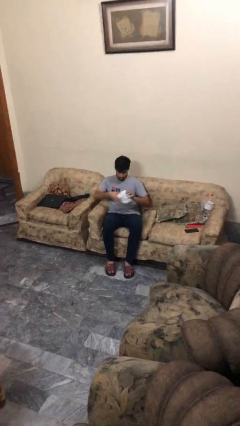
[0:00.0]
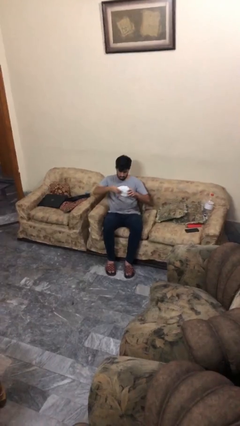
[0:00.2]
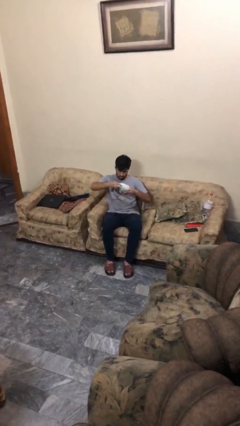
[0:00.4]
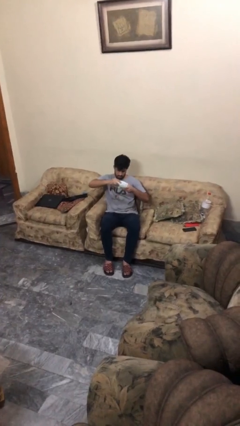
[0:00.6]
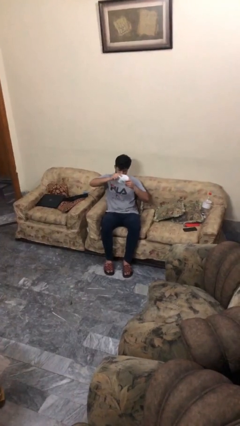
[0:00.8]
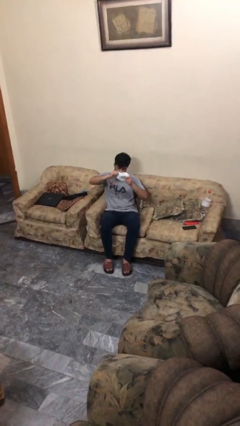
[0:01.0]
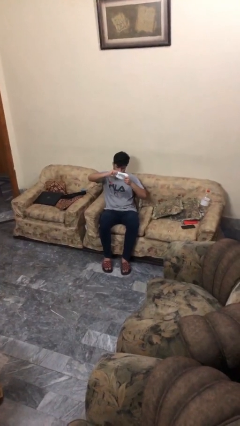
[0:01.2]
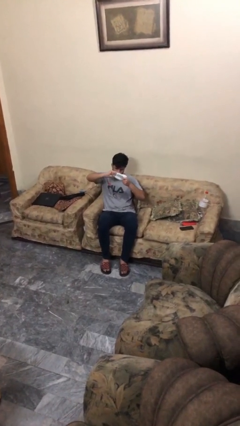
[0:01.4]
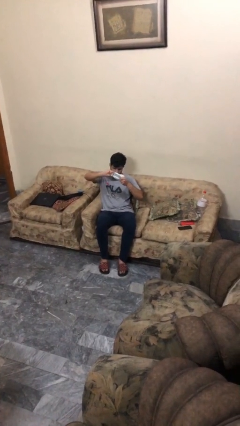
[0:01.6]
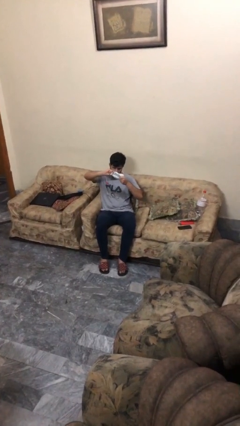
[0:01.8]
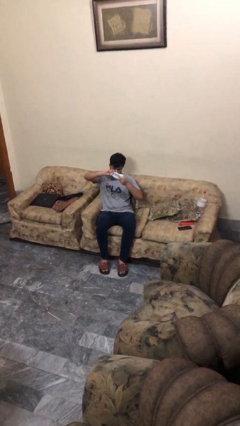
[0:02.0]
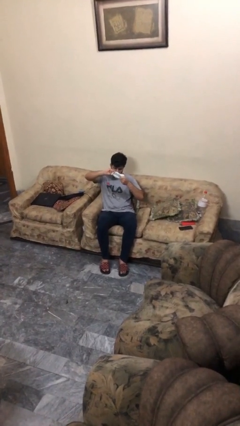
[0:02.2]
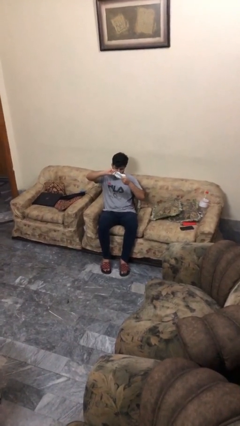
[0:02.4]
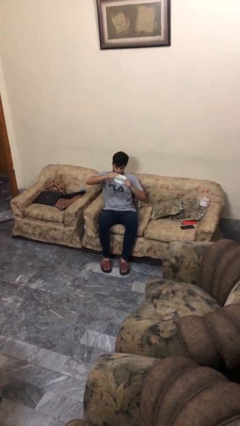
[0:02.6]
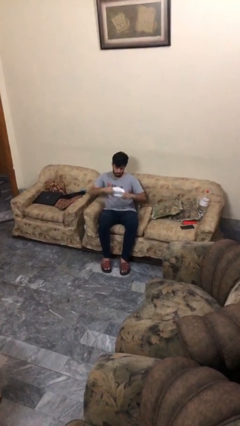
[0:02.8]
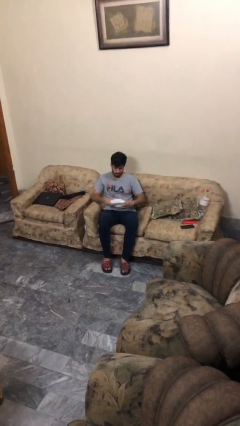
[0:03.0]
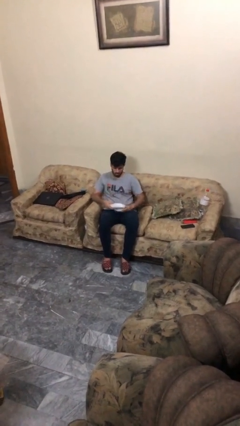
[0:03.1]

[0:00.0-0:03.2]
person squeezes object

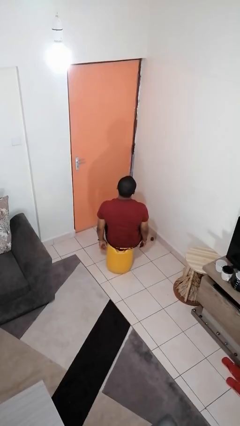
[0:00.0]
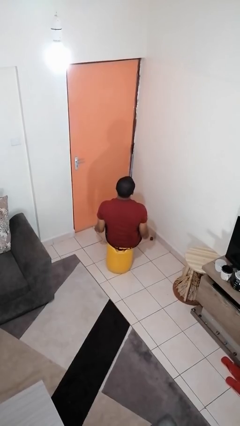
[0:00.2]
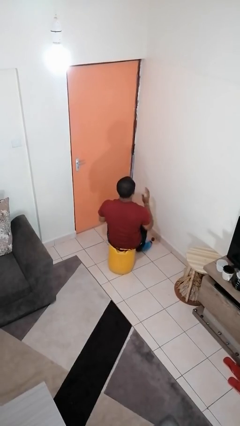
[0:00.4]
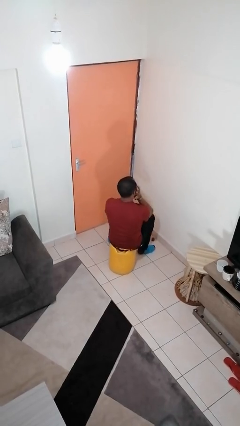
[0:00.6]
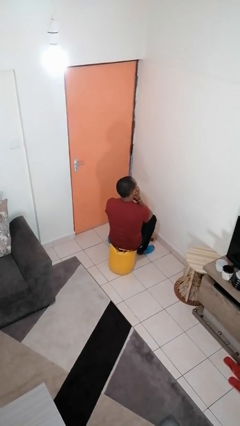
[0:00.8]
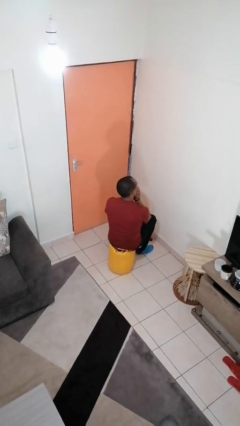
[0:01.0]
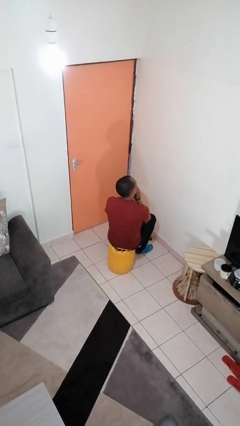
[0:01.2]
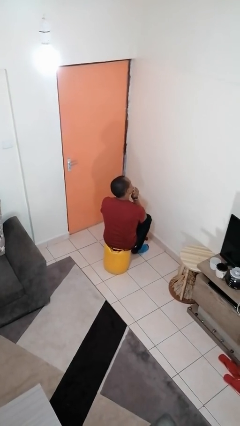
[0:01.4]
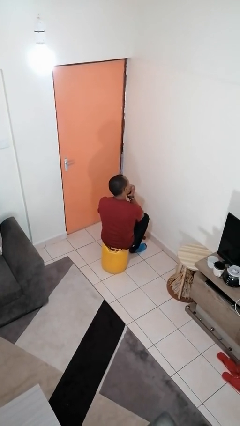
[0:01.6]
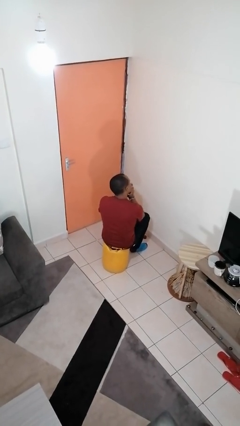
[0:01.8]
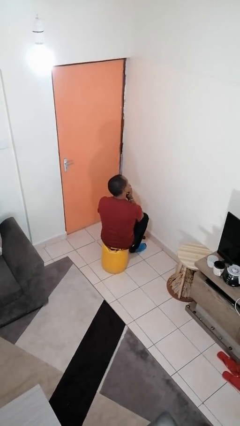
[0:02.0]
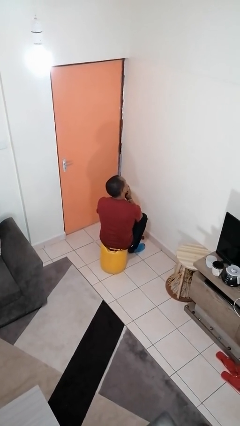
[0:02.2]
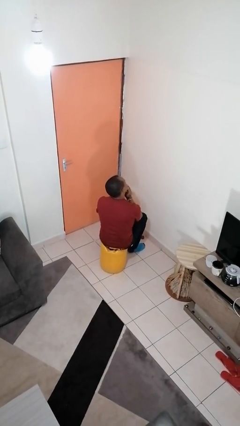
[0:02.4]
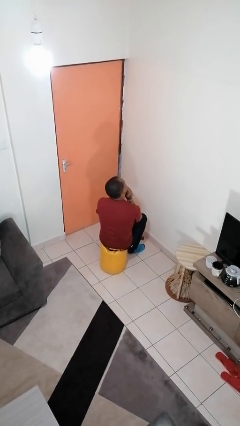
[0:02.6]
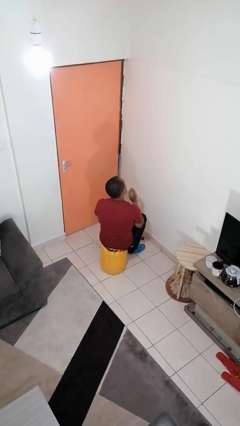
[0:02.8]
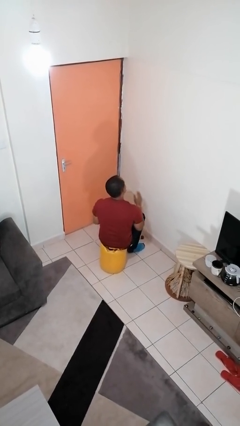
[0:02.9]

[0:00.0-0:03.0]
person strokes chin

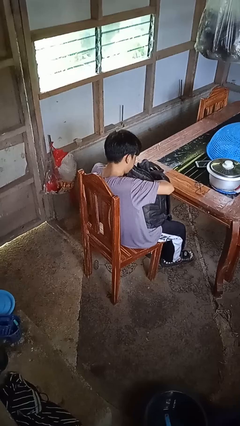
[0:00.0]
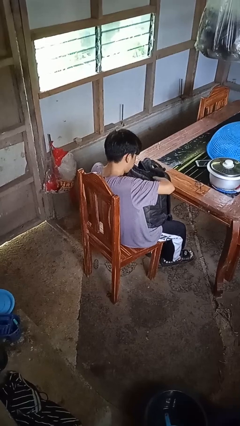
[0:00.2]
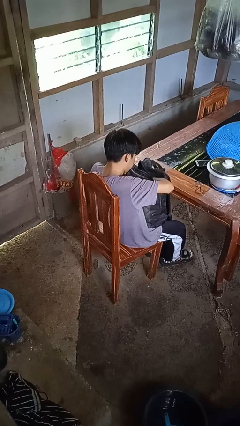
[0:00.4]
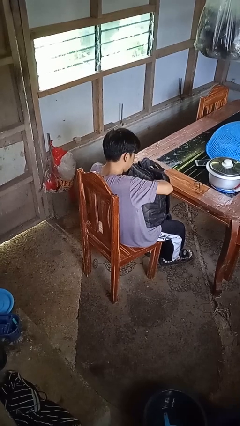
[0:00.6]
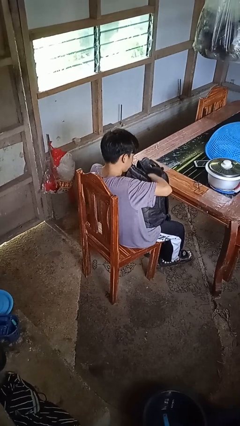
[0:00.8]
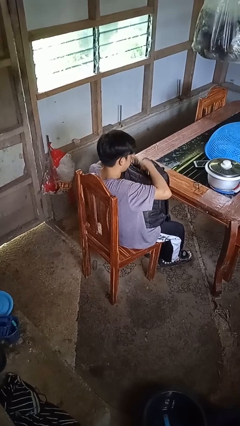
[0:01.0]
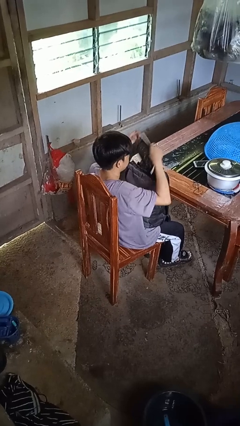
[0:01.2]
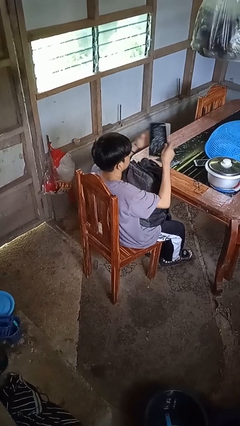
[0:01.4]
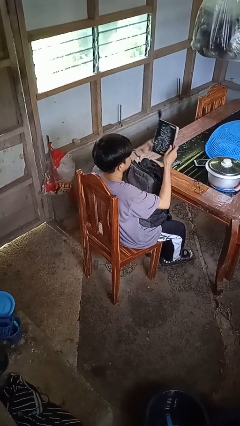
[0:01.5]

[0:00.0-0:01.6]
person takes object from backpack

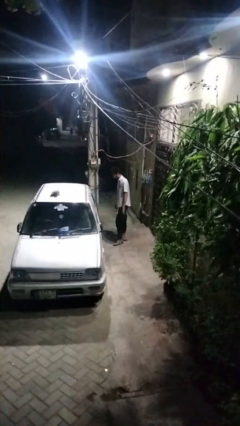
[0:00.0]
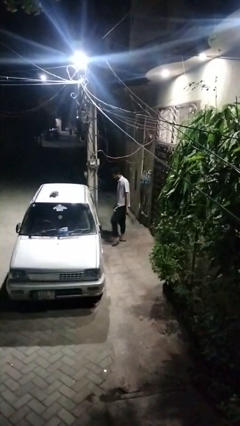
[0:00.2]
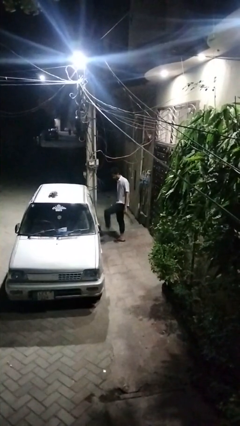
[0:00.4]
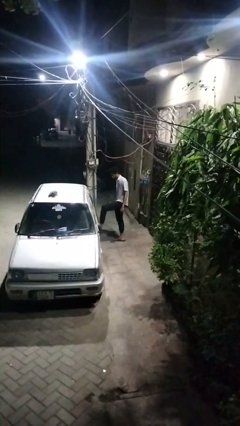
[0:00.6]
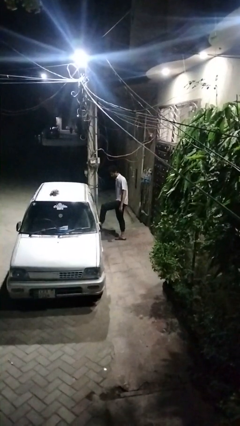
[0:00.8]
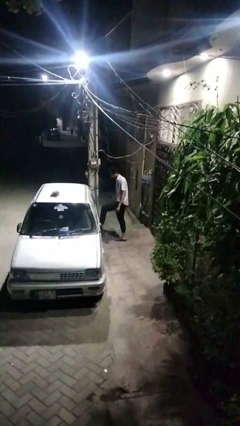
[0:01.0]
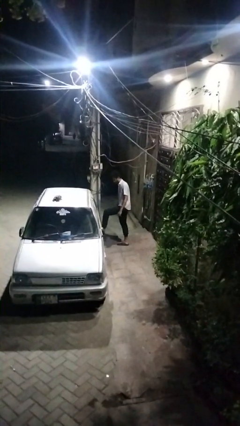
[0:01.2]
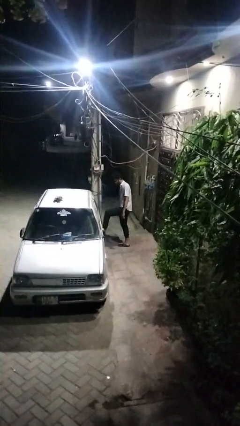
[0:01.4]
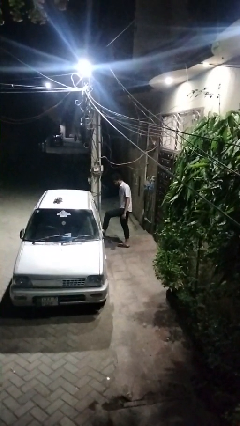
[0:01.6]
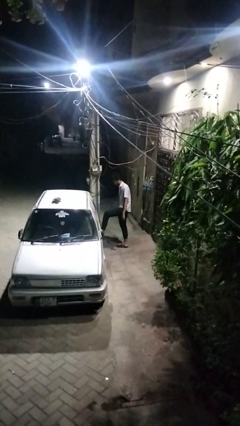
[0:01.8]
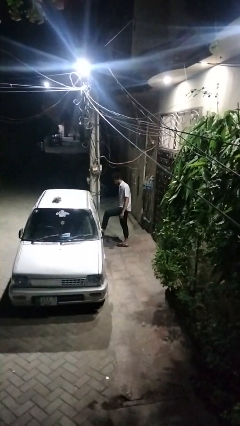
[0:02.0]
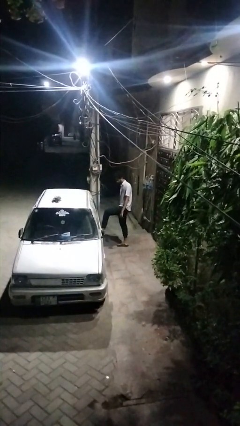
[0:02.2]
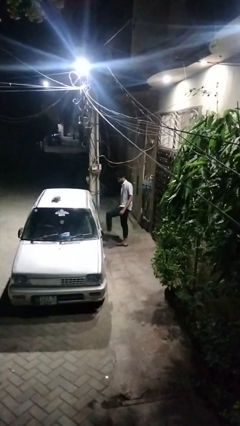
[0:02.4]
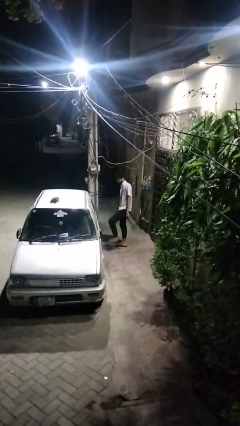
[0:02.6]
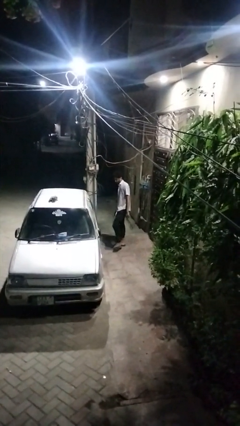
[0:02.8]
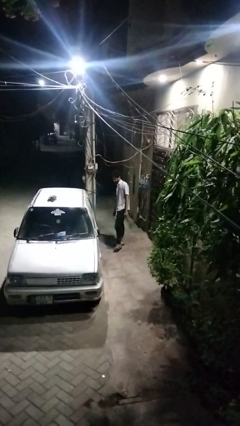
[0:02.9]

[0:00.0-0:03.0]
person kicks car tires

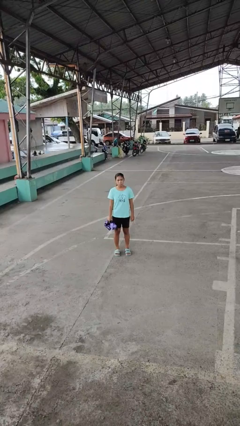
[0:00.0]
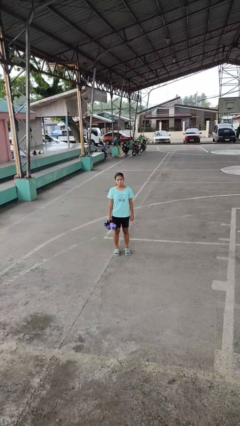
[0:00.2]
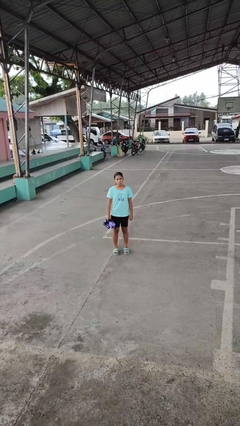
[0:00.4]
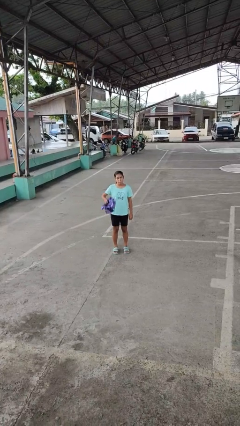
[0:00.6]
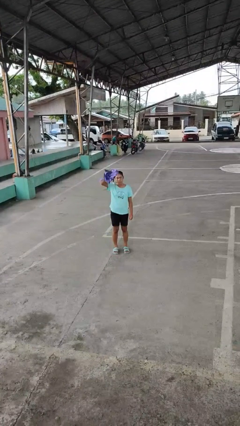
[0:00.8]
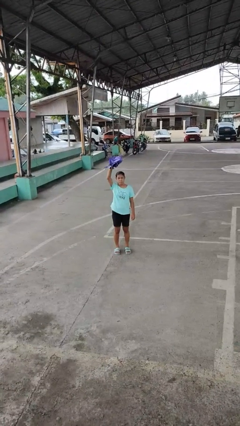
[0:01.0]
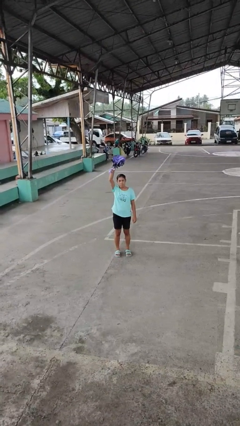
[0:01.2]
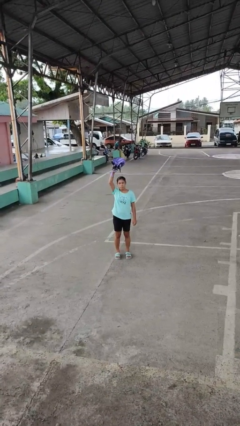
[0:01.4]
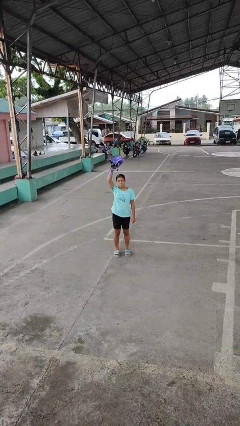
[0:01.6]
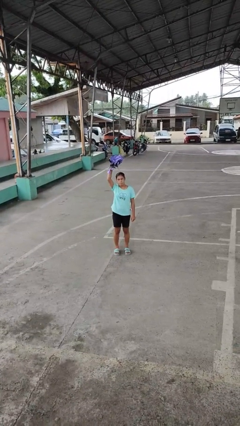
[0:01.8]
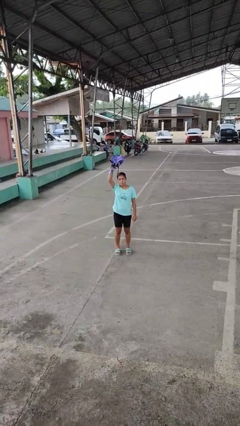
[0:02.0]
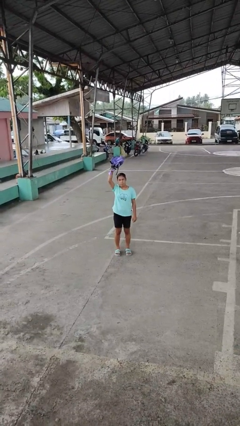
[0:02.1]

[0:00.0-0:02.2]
person holds object above head

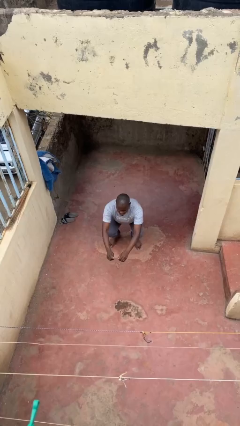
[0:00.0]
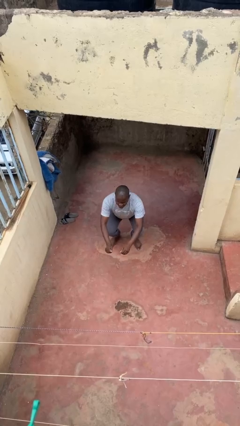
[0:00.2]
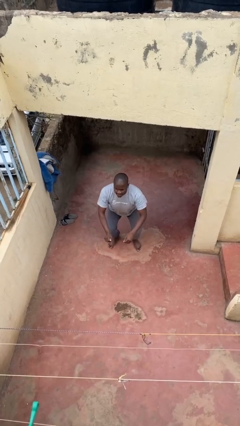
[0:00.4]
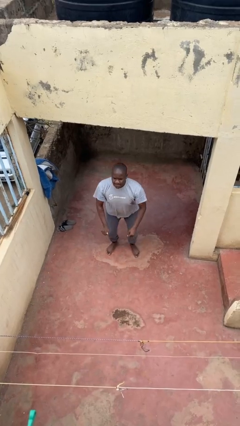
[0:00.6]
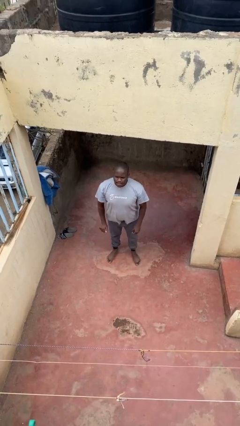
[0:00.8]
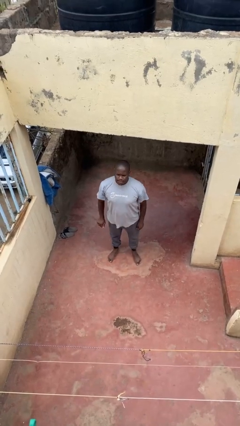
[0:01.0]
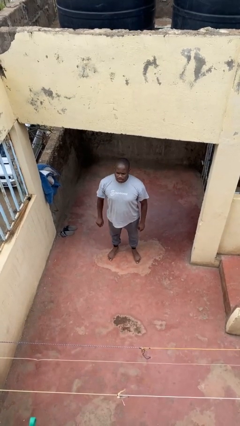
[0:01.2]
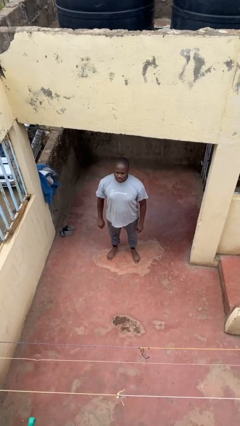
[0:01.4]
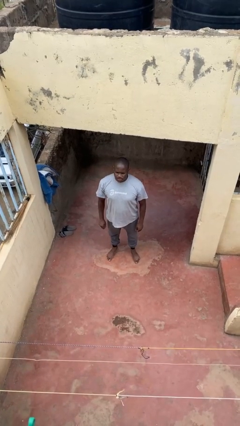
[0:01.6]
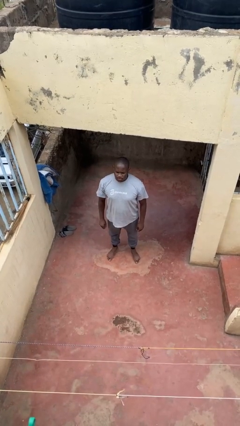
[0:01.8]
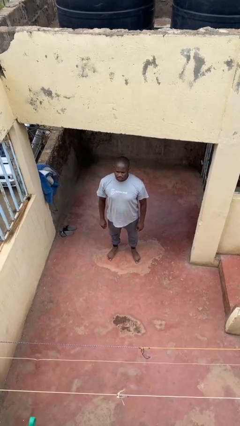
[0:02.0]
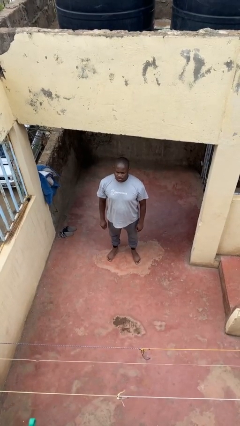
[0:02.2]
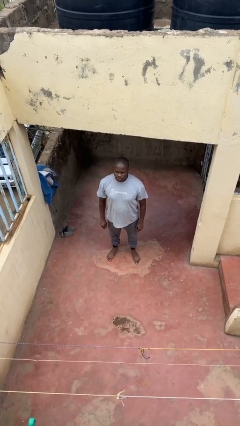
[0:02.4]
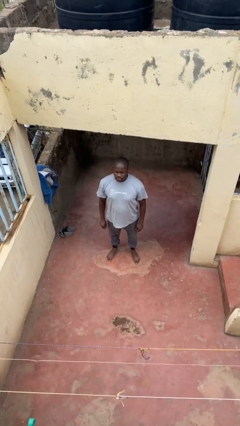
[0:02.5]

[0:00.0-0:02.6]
person stands up

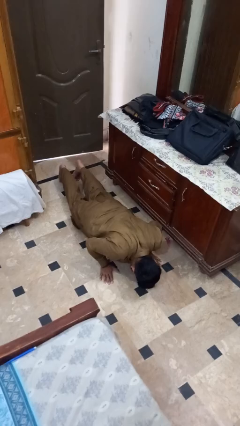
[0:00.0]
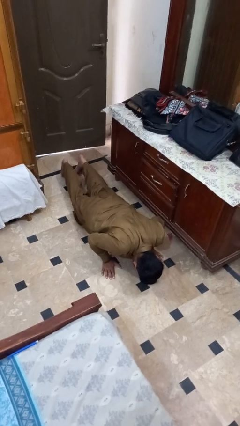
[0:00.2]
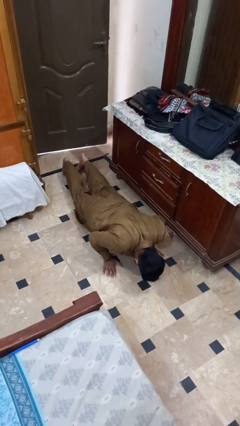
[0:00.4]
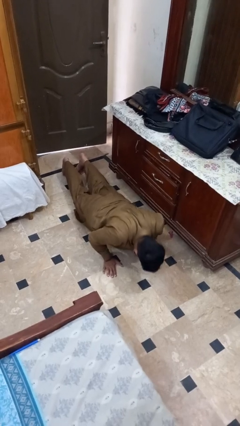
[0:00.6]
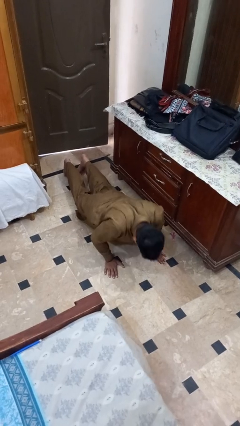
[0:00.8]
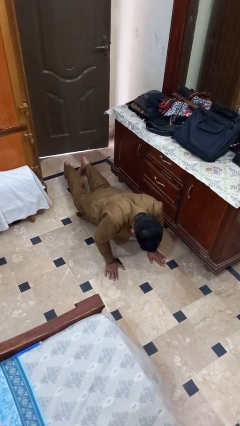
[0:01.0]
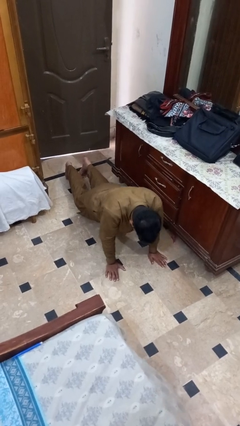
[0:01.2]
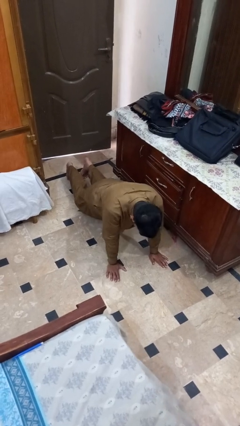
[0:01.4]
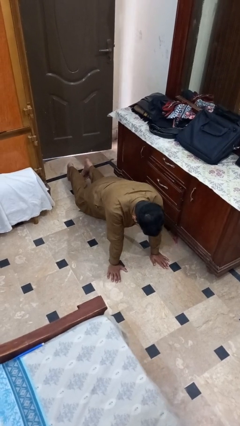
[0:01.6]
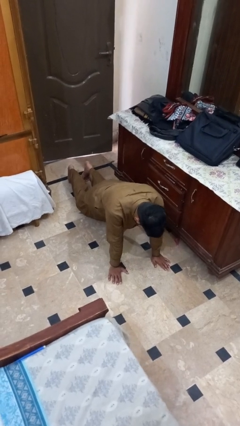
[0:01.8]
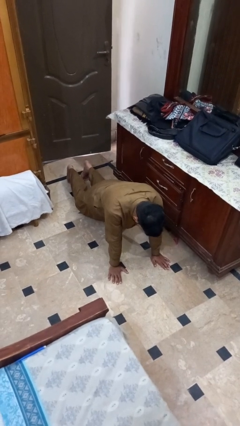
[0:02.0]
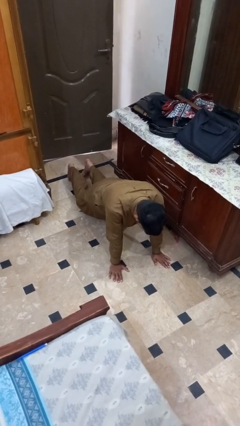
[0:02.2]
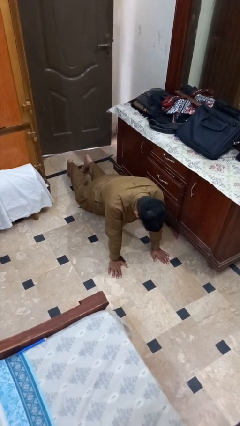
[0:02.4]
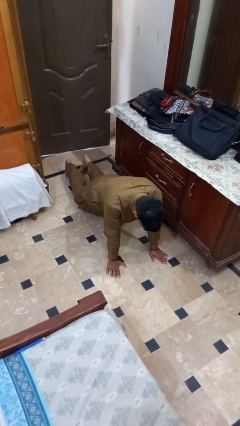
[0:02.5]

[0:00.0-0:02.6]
person exercises with pushup
